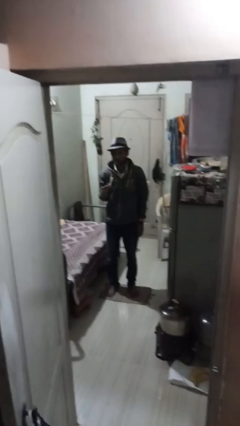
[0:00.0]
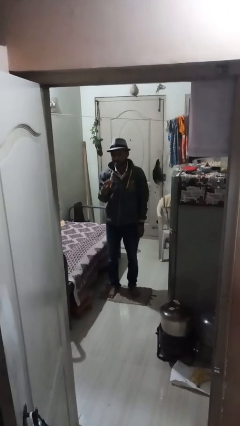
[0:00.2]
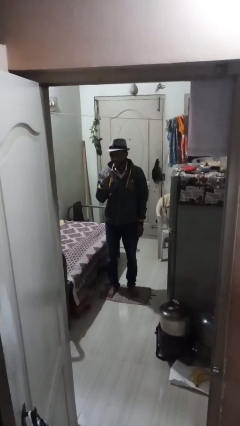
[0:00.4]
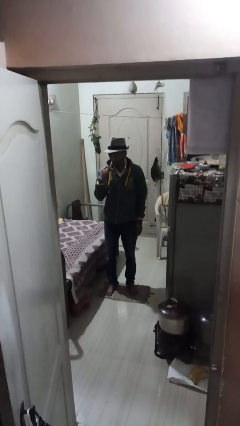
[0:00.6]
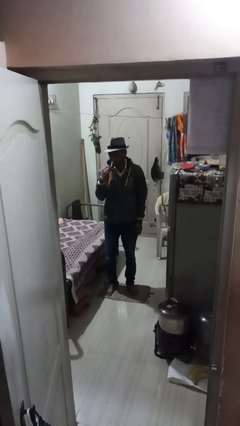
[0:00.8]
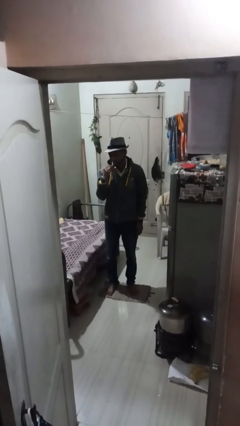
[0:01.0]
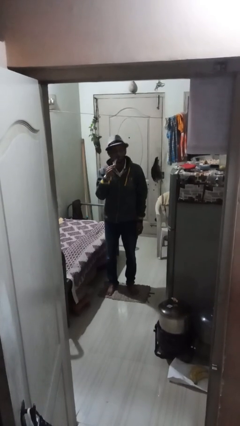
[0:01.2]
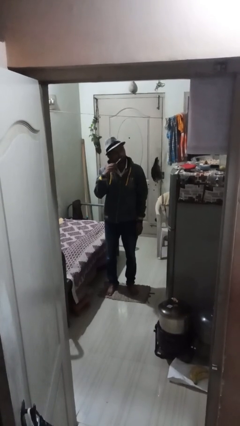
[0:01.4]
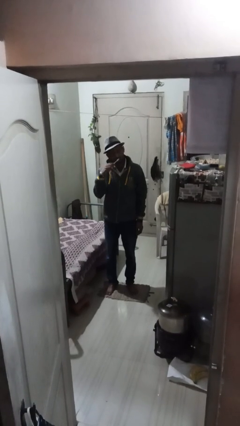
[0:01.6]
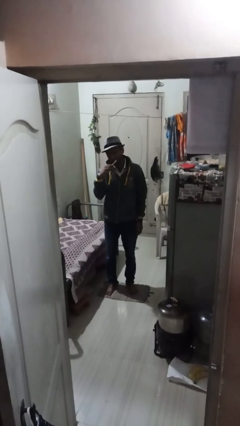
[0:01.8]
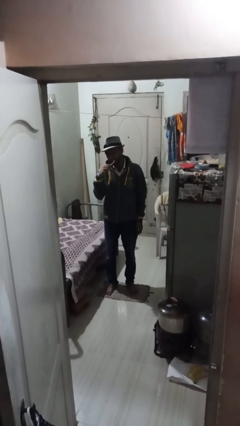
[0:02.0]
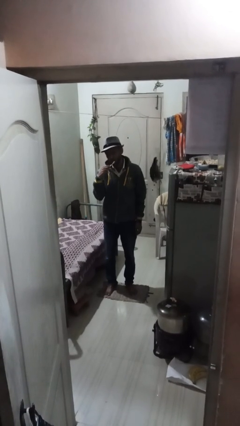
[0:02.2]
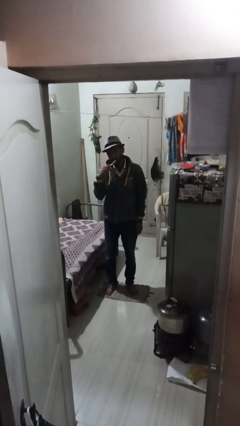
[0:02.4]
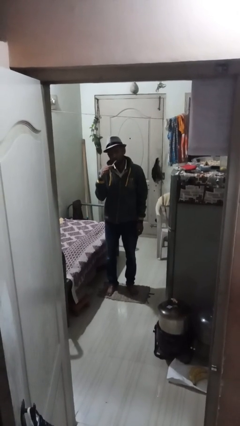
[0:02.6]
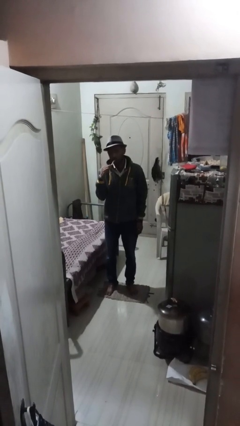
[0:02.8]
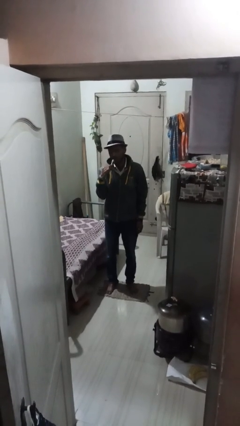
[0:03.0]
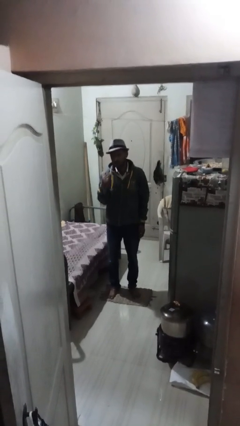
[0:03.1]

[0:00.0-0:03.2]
person brushes teeth

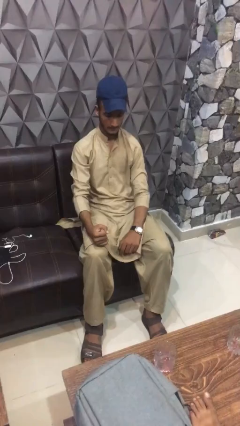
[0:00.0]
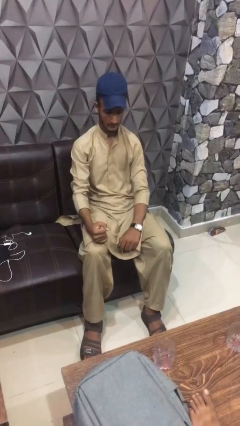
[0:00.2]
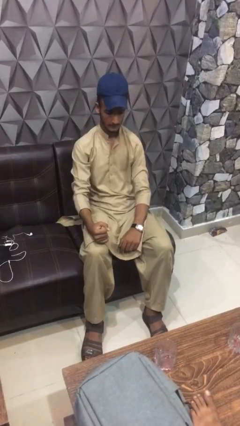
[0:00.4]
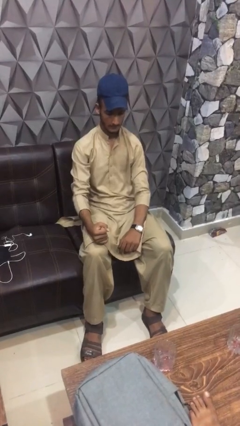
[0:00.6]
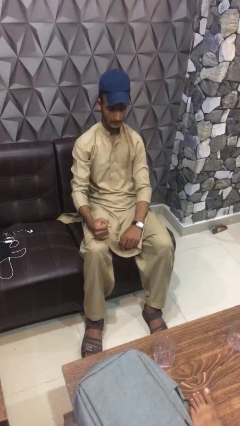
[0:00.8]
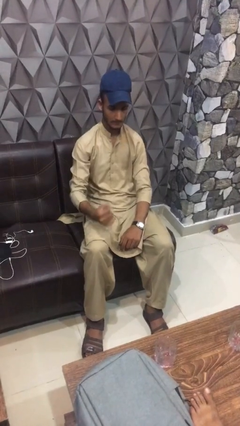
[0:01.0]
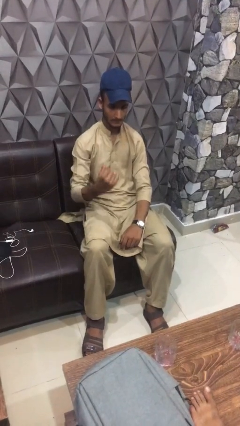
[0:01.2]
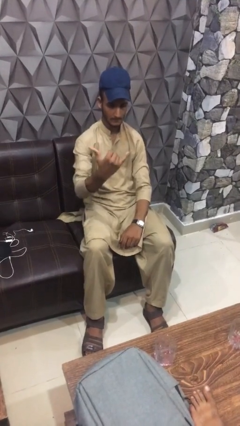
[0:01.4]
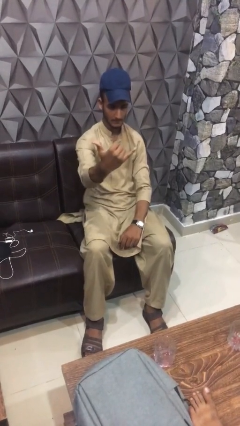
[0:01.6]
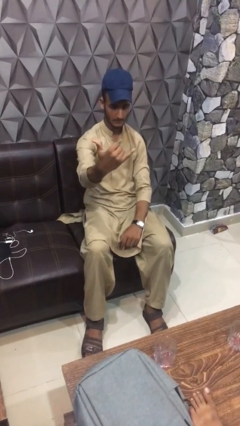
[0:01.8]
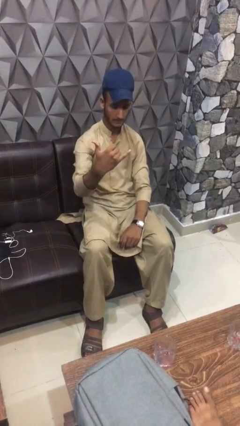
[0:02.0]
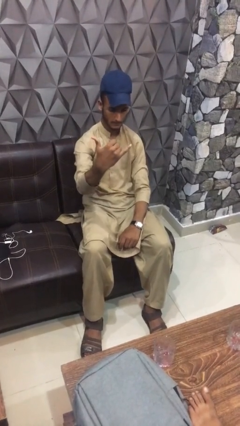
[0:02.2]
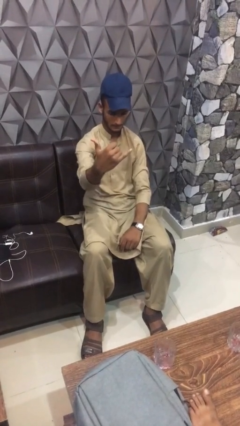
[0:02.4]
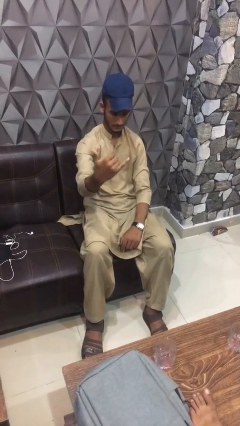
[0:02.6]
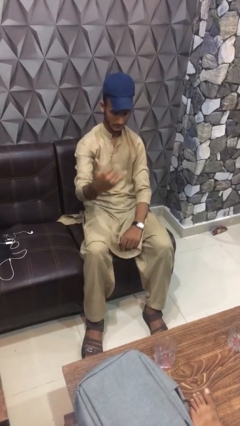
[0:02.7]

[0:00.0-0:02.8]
person gestures hang loose

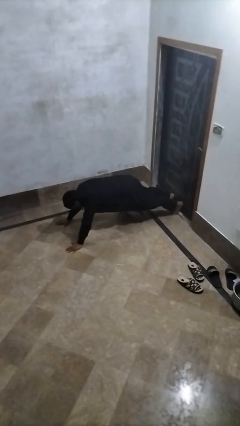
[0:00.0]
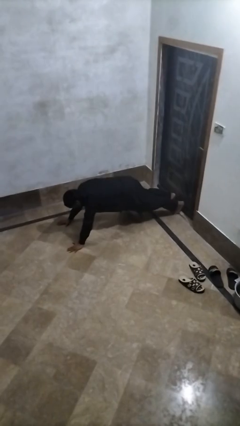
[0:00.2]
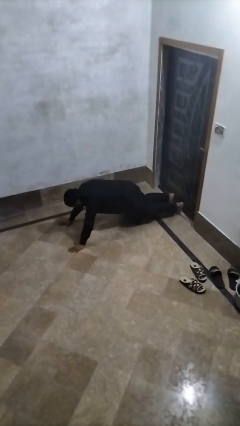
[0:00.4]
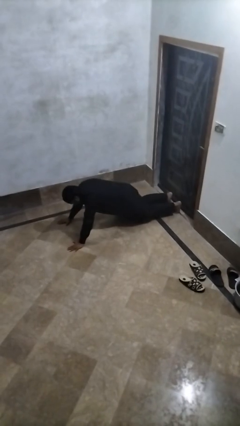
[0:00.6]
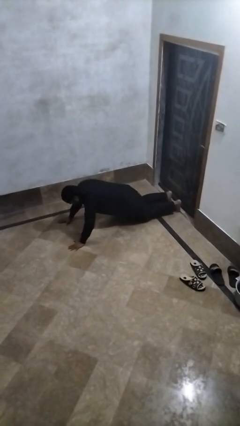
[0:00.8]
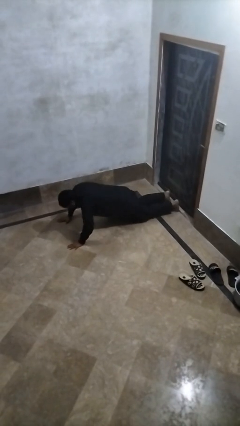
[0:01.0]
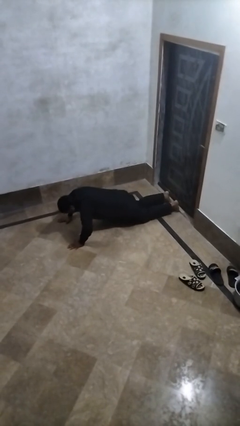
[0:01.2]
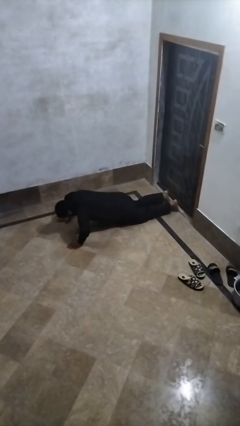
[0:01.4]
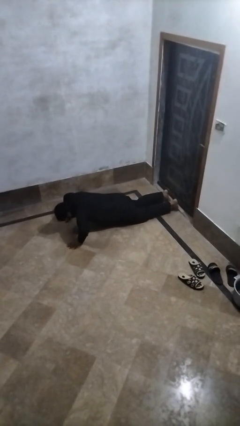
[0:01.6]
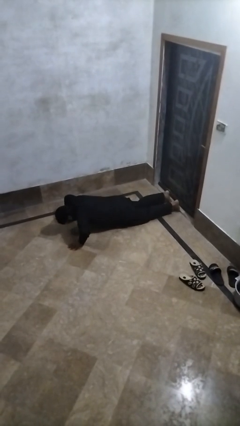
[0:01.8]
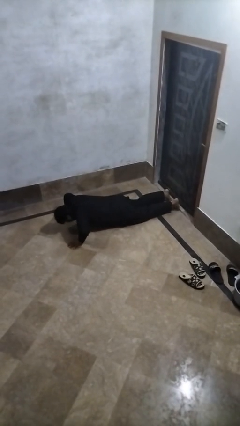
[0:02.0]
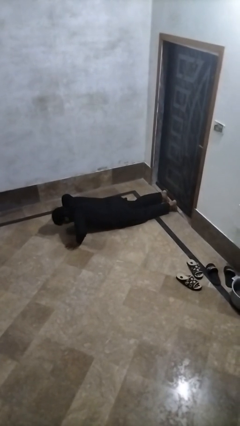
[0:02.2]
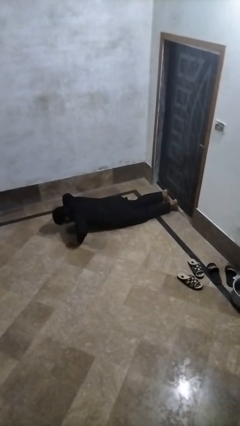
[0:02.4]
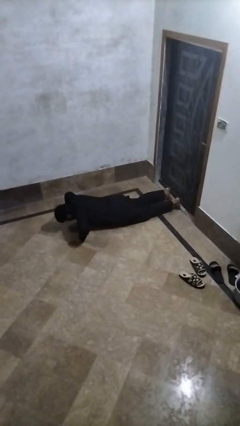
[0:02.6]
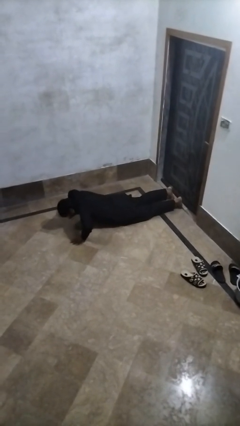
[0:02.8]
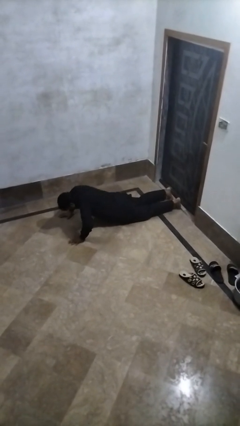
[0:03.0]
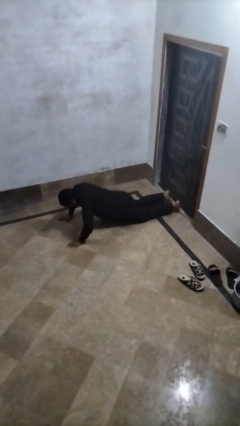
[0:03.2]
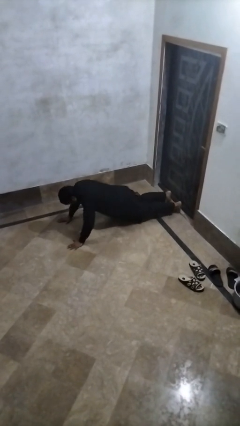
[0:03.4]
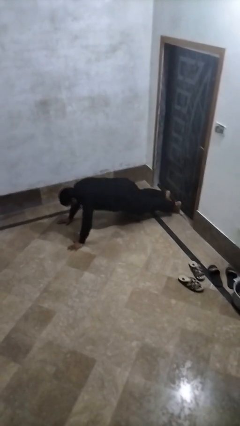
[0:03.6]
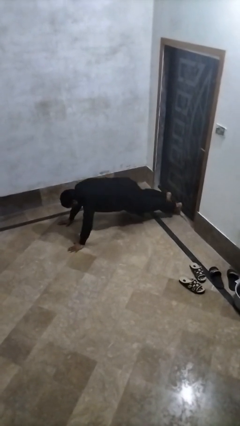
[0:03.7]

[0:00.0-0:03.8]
person exercises with pushup

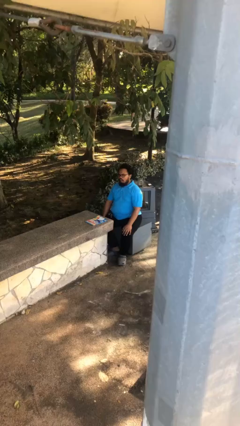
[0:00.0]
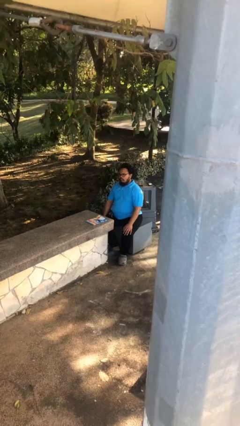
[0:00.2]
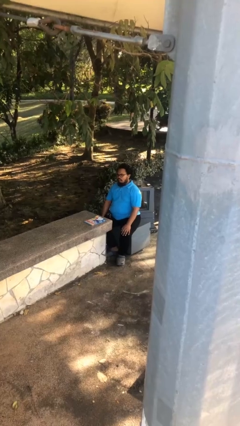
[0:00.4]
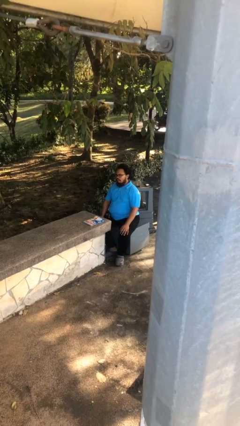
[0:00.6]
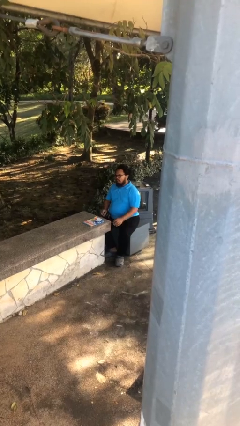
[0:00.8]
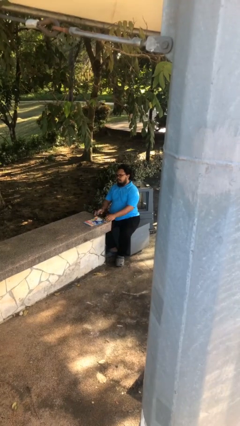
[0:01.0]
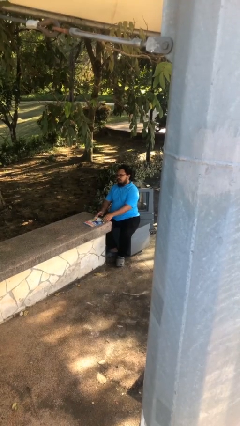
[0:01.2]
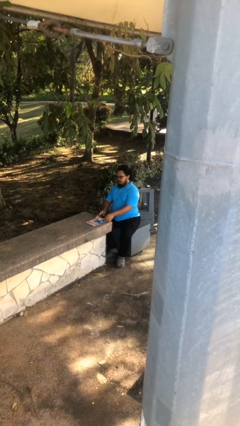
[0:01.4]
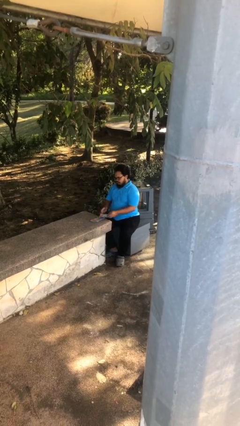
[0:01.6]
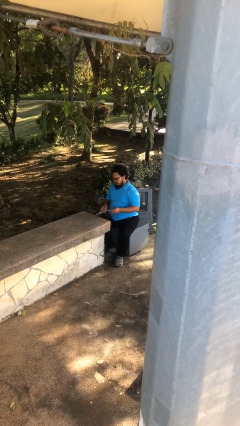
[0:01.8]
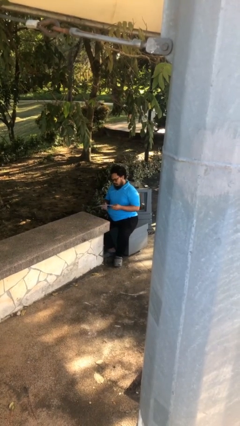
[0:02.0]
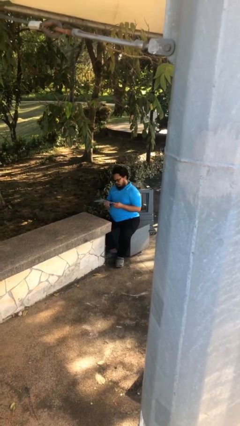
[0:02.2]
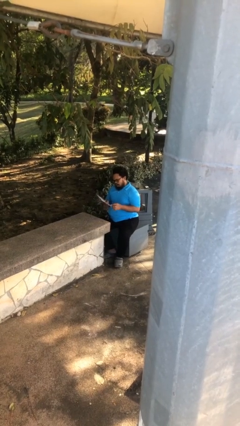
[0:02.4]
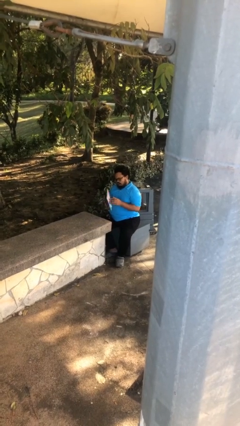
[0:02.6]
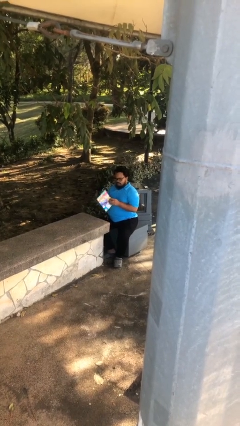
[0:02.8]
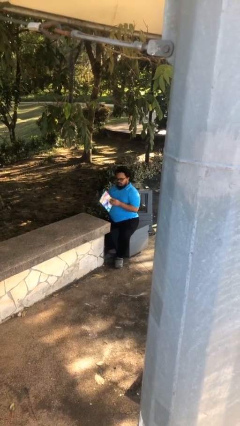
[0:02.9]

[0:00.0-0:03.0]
person picks up object from table

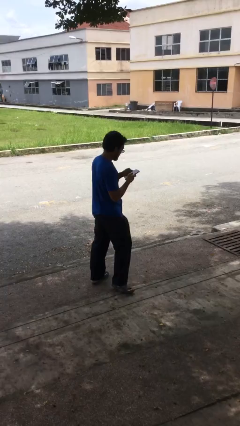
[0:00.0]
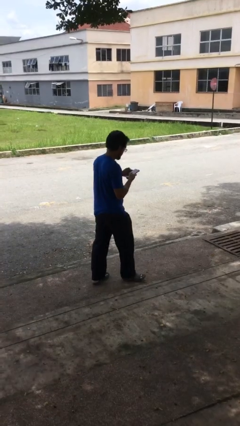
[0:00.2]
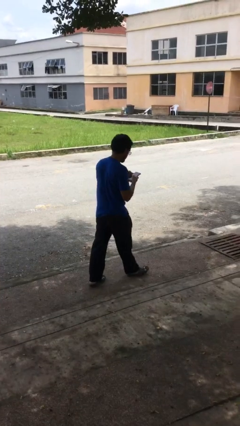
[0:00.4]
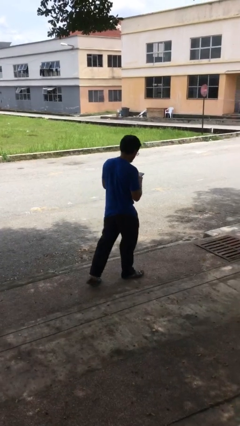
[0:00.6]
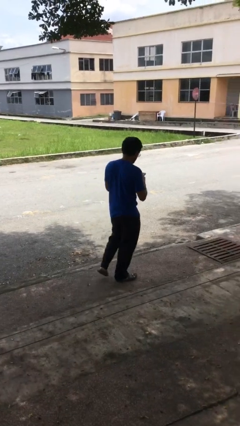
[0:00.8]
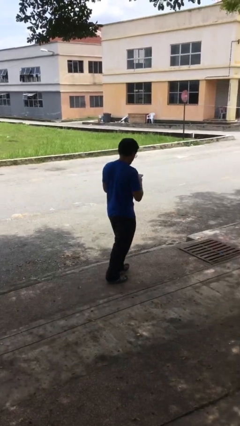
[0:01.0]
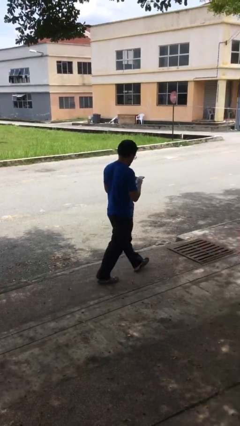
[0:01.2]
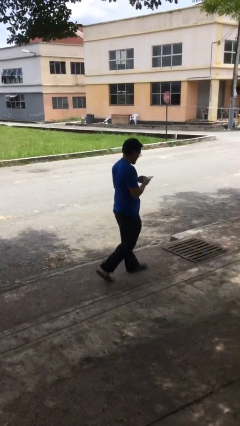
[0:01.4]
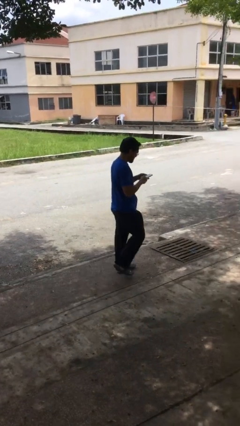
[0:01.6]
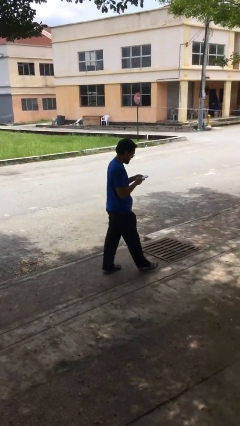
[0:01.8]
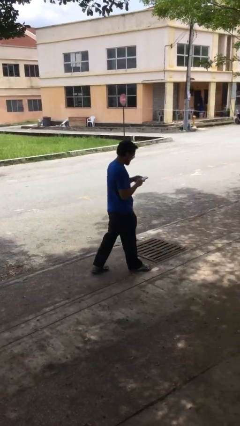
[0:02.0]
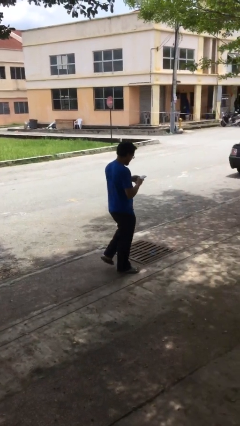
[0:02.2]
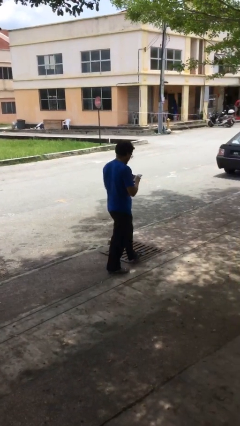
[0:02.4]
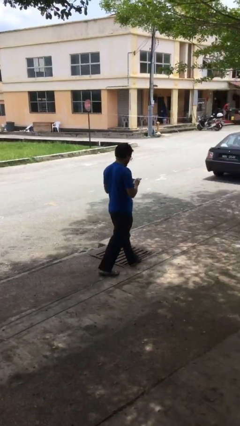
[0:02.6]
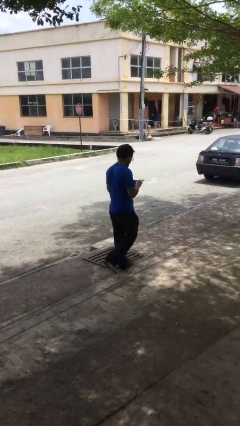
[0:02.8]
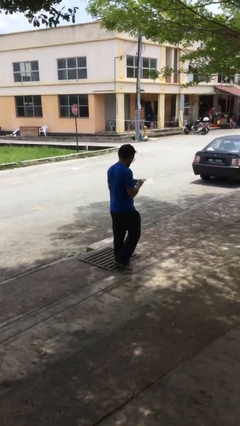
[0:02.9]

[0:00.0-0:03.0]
person texts on phone

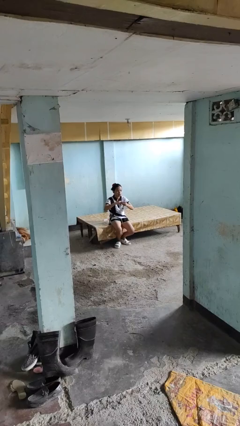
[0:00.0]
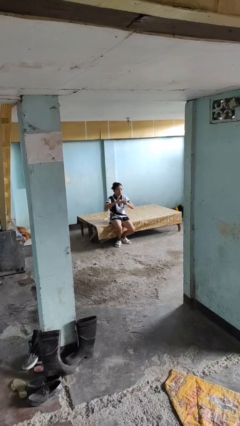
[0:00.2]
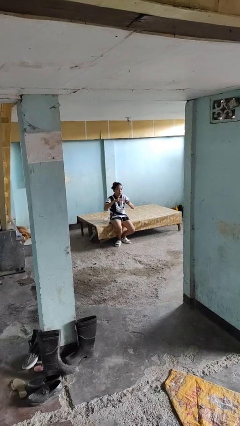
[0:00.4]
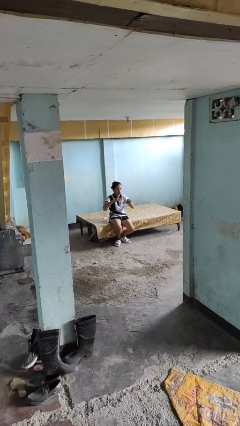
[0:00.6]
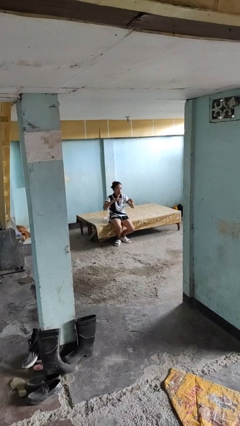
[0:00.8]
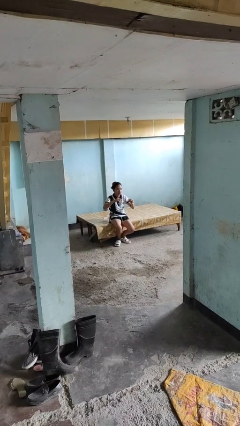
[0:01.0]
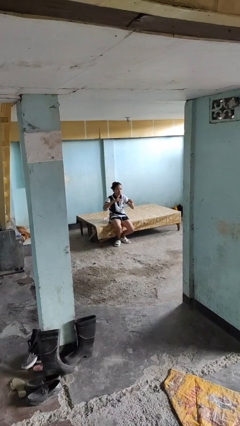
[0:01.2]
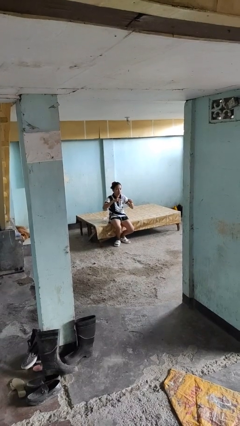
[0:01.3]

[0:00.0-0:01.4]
person takes off ring
